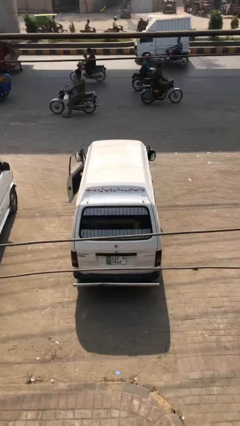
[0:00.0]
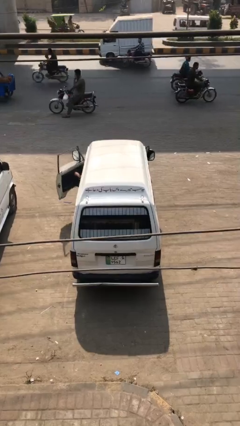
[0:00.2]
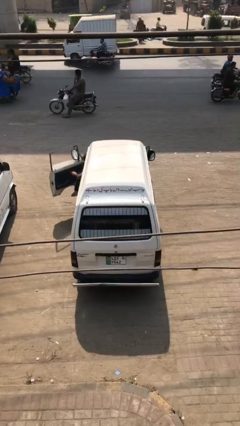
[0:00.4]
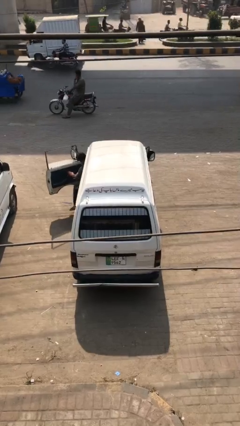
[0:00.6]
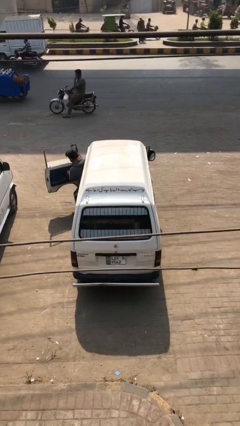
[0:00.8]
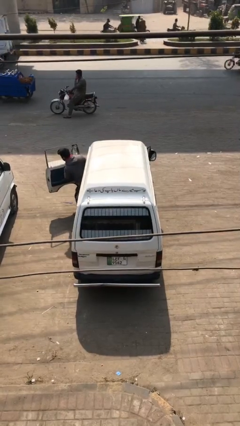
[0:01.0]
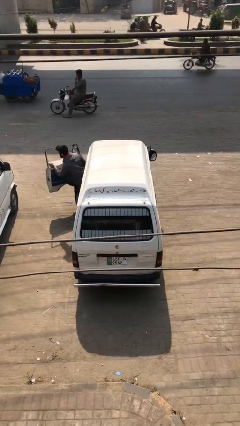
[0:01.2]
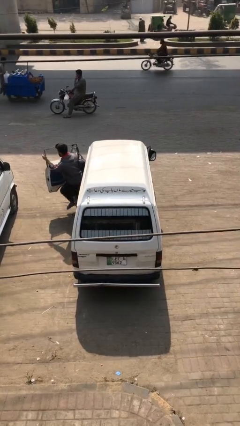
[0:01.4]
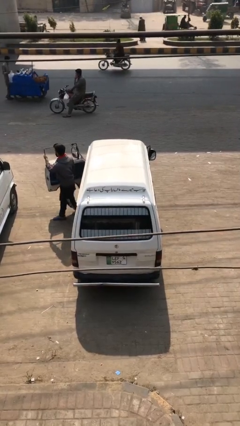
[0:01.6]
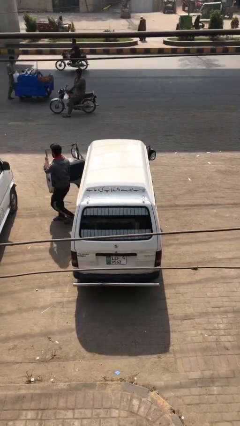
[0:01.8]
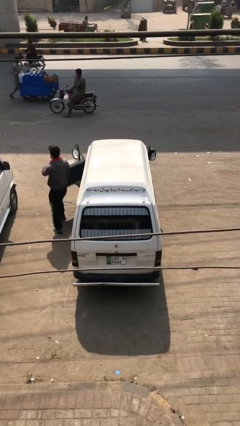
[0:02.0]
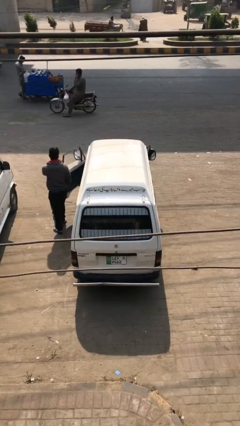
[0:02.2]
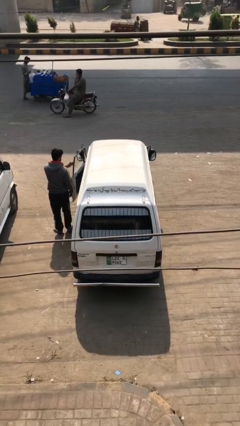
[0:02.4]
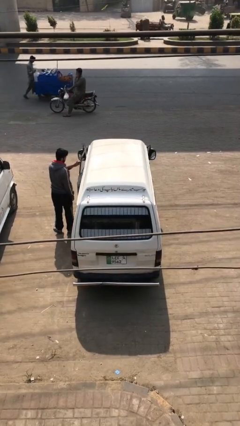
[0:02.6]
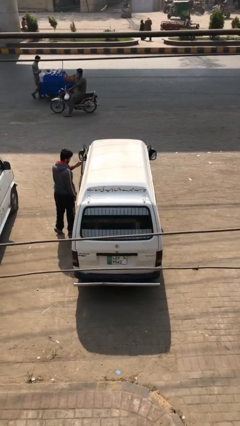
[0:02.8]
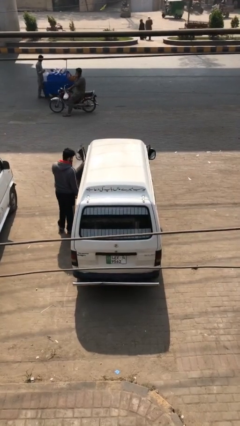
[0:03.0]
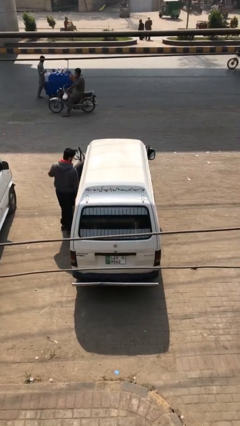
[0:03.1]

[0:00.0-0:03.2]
car drops off person

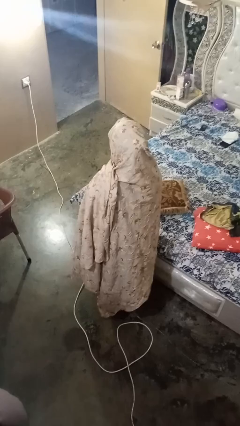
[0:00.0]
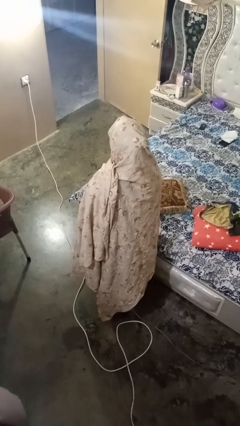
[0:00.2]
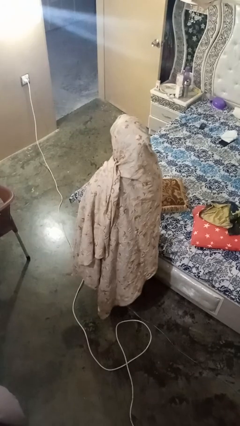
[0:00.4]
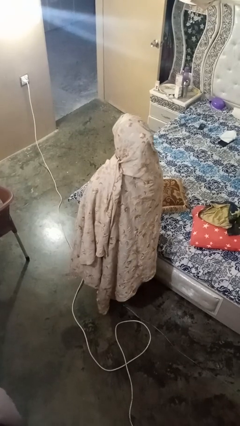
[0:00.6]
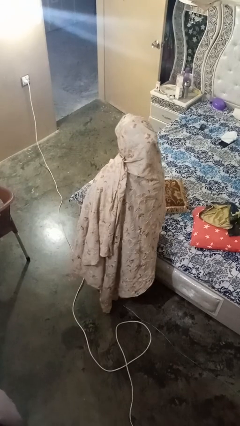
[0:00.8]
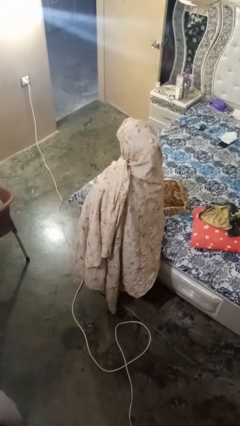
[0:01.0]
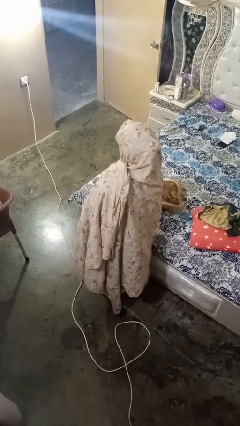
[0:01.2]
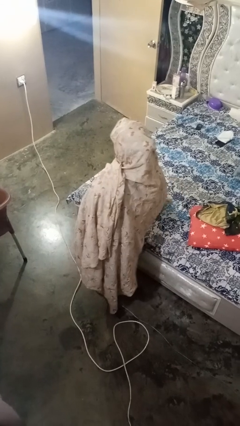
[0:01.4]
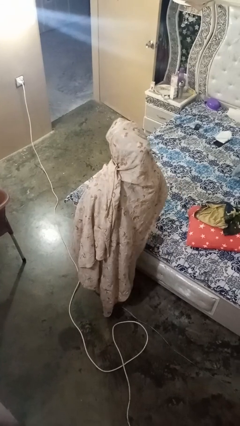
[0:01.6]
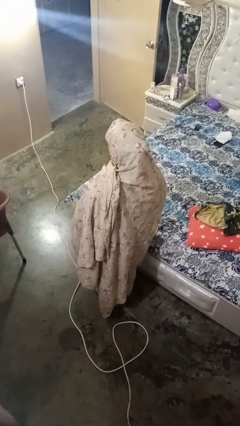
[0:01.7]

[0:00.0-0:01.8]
person picks up object from bed

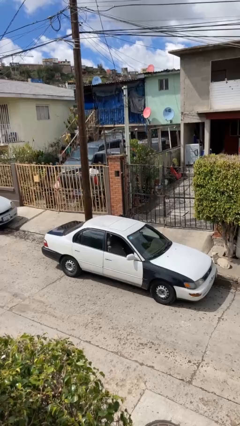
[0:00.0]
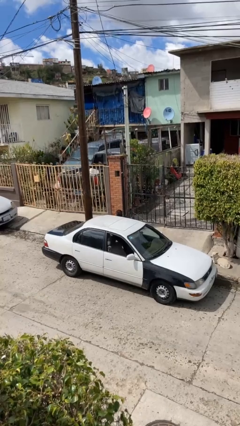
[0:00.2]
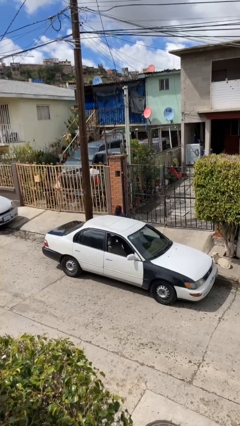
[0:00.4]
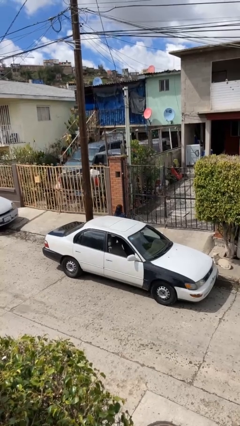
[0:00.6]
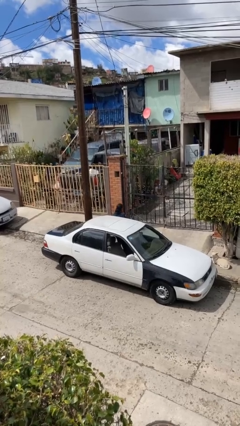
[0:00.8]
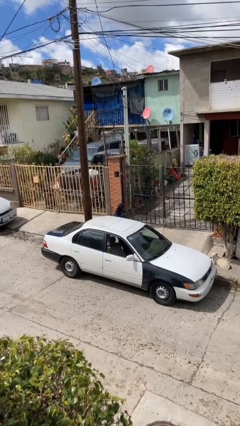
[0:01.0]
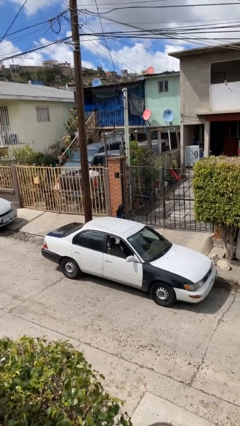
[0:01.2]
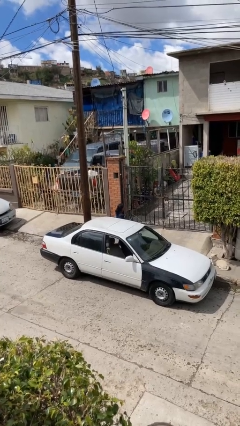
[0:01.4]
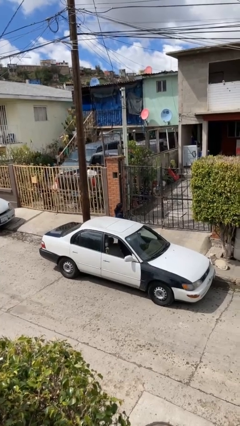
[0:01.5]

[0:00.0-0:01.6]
person exits car

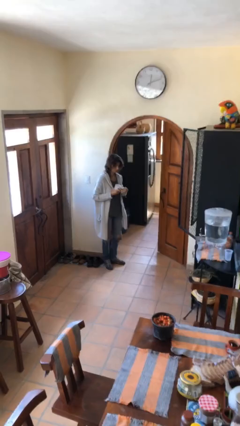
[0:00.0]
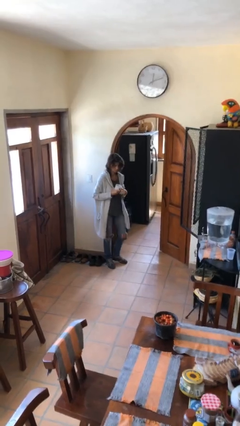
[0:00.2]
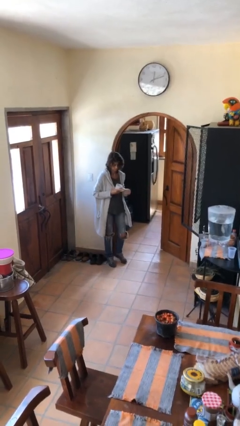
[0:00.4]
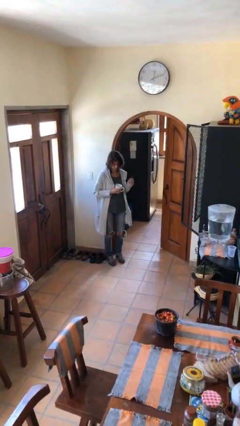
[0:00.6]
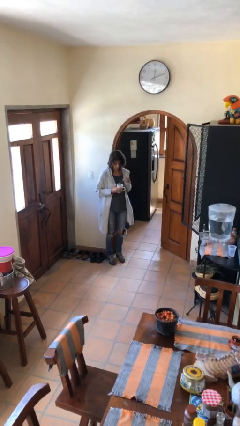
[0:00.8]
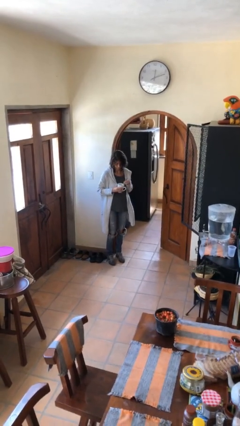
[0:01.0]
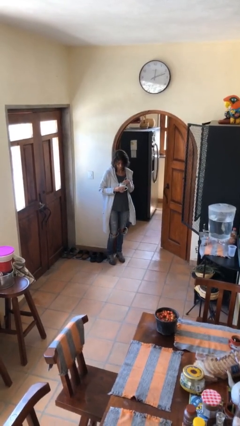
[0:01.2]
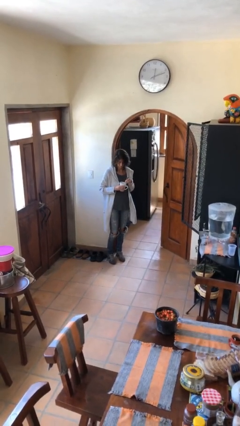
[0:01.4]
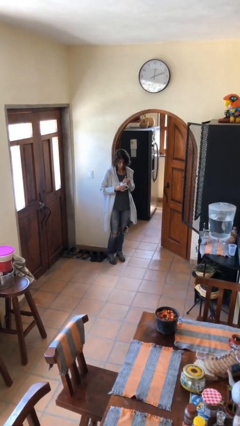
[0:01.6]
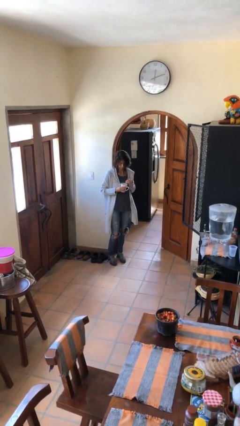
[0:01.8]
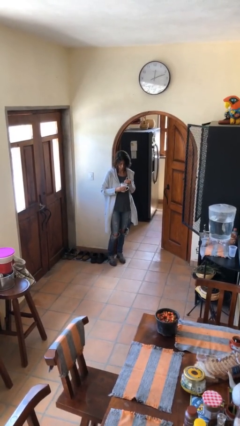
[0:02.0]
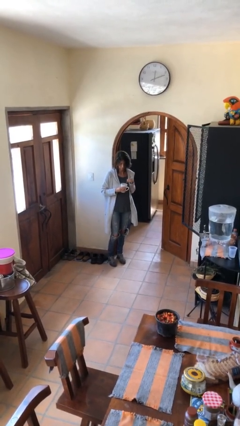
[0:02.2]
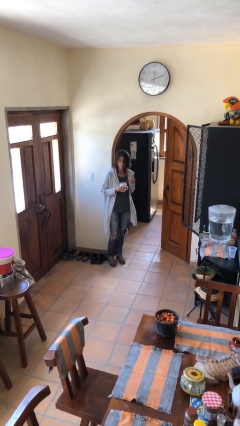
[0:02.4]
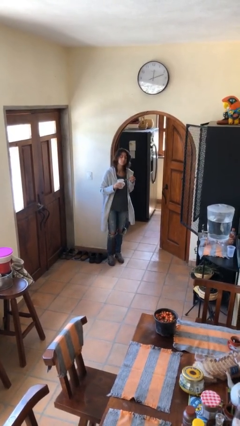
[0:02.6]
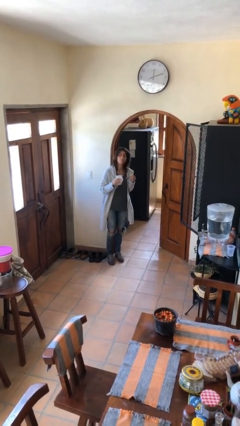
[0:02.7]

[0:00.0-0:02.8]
person stirs mug

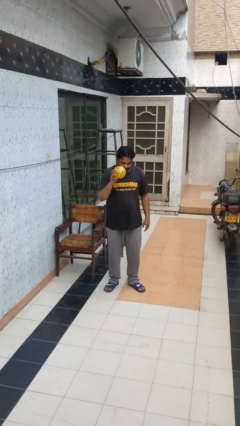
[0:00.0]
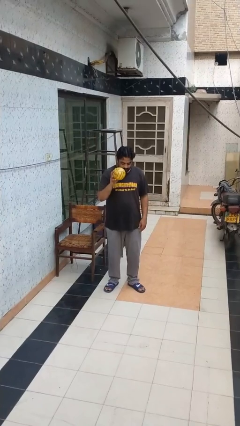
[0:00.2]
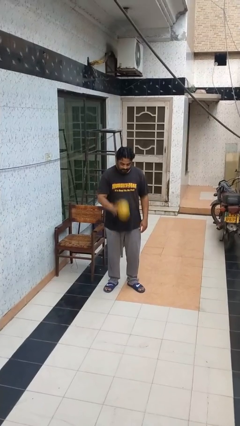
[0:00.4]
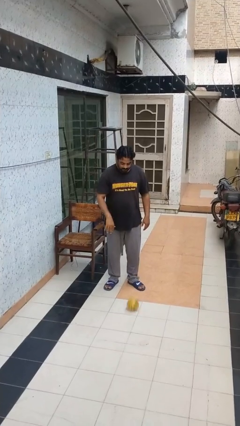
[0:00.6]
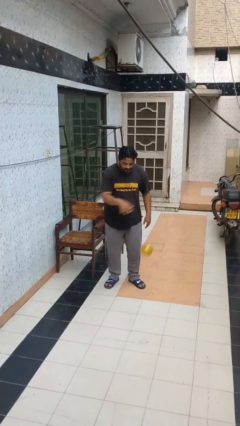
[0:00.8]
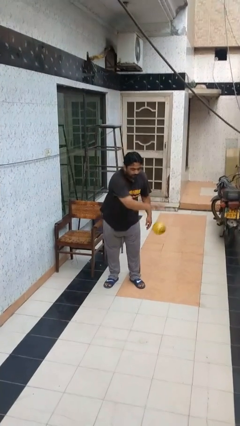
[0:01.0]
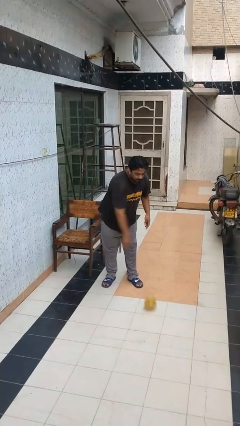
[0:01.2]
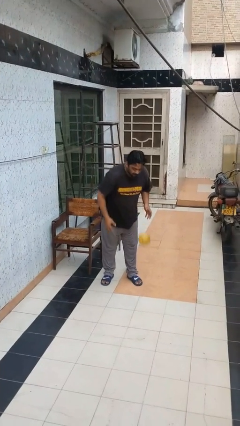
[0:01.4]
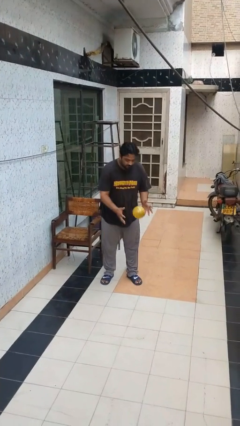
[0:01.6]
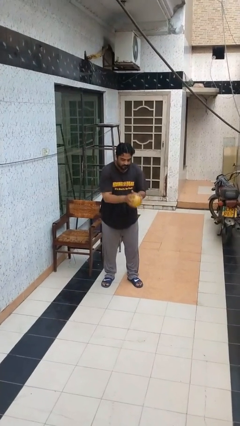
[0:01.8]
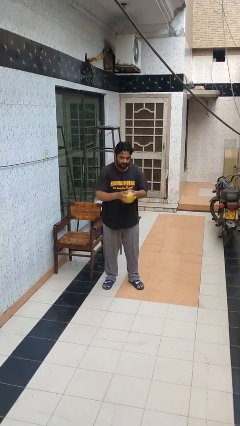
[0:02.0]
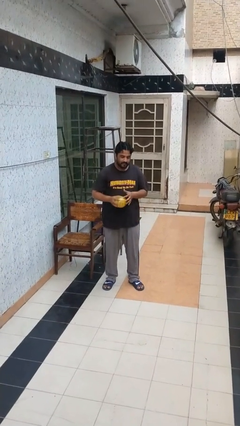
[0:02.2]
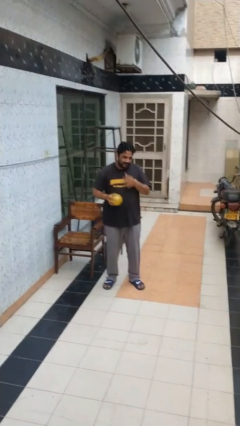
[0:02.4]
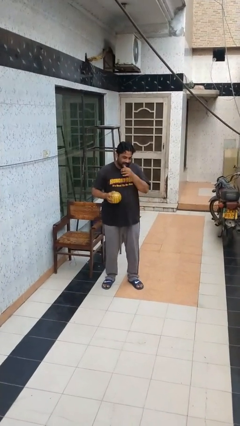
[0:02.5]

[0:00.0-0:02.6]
person bounces ball on floor

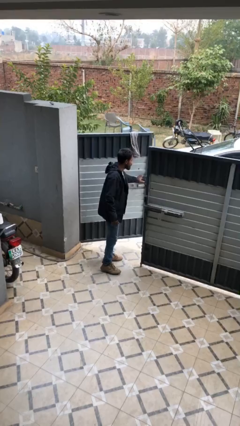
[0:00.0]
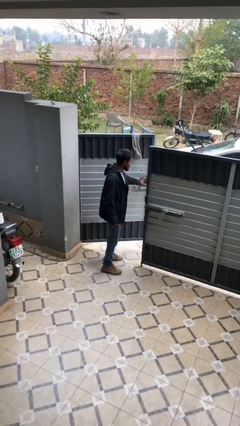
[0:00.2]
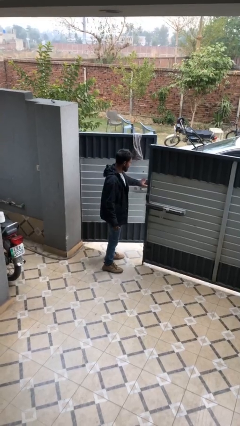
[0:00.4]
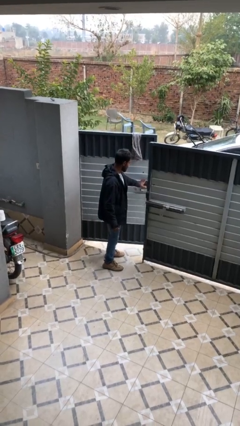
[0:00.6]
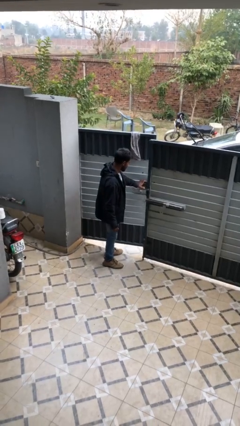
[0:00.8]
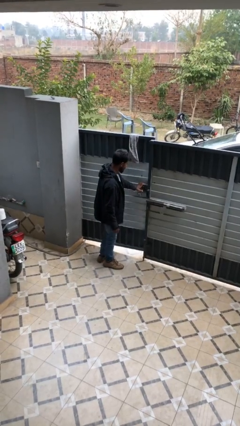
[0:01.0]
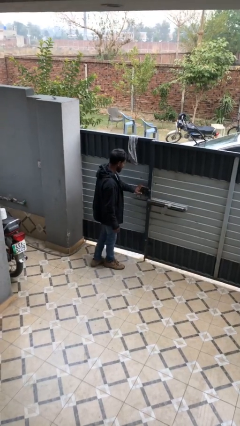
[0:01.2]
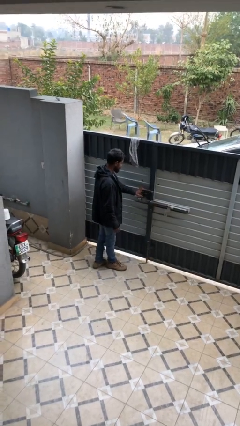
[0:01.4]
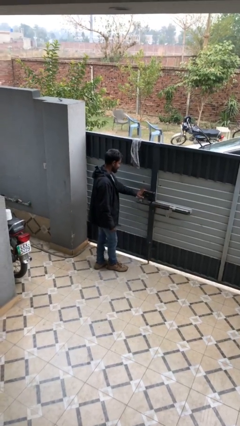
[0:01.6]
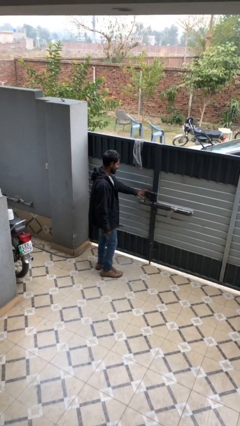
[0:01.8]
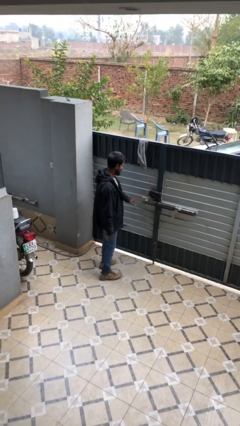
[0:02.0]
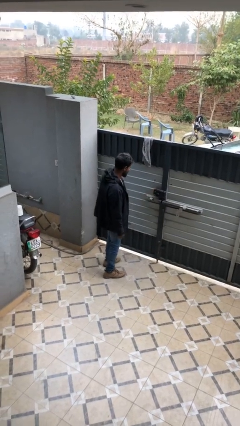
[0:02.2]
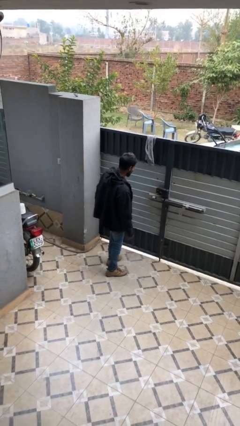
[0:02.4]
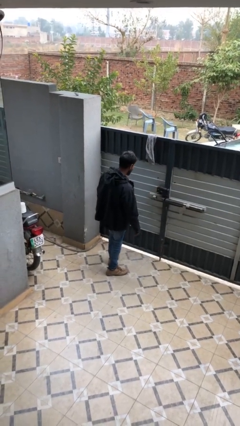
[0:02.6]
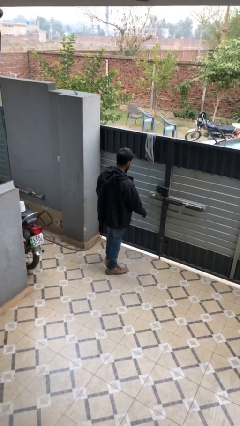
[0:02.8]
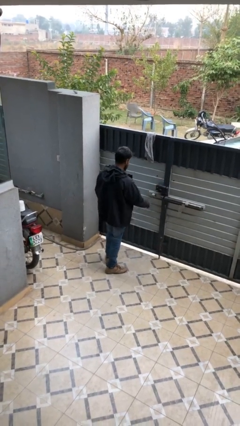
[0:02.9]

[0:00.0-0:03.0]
person closes facility door

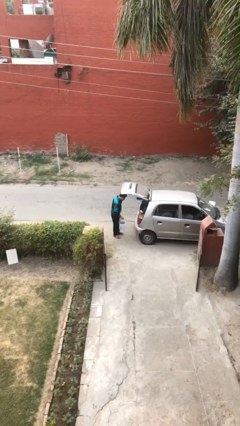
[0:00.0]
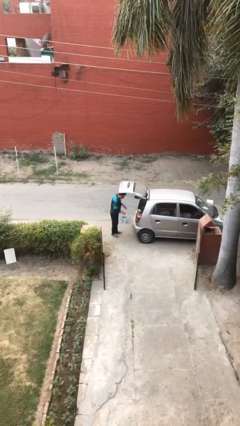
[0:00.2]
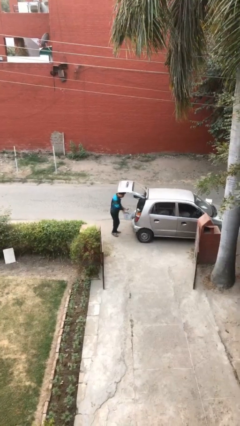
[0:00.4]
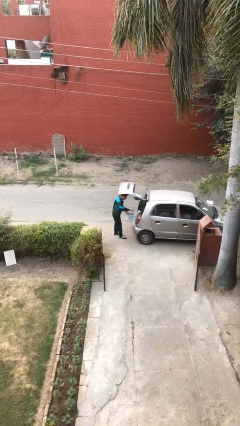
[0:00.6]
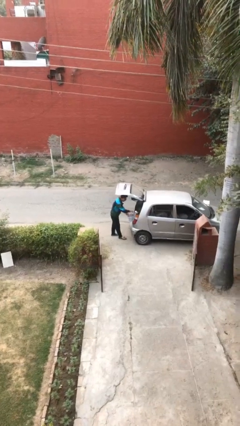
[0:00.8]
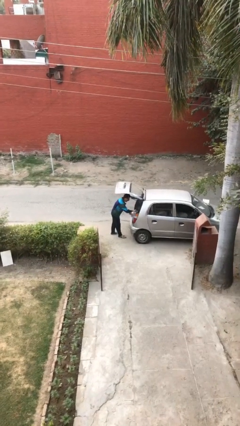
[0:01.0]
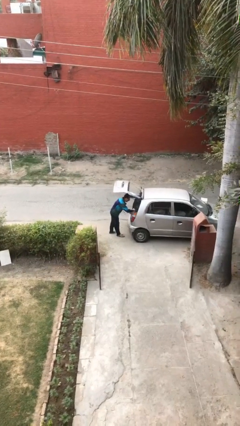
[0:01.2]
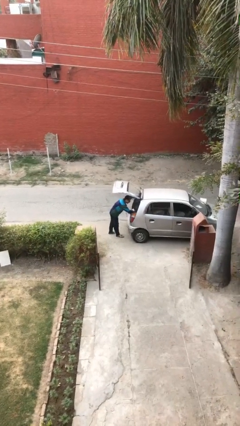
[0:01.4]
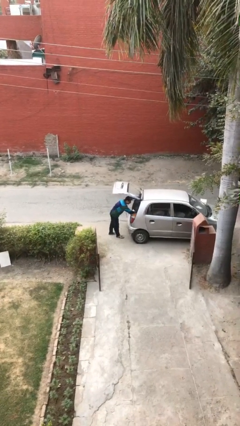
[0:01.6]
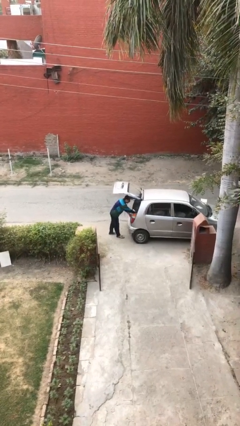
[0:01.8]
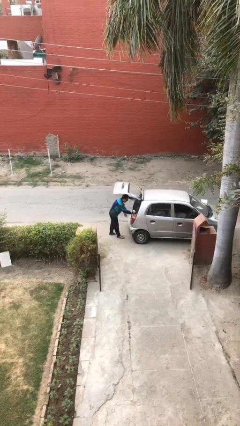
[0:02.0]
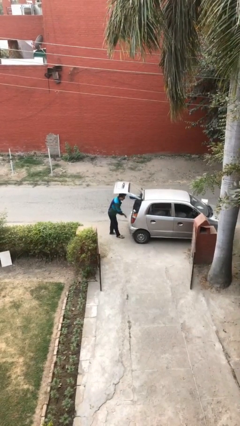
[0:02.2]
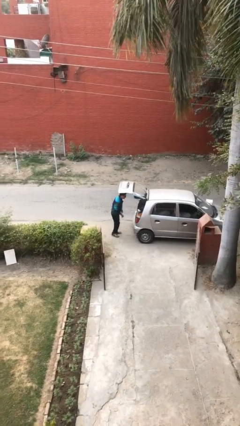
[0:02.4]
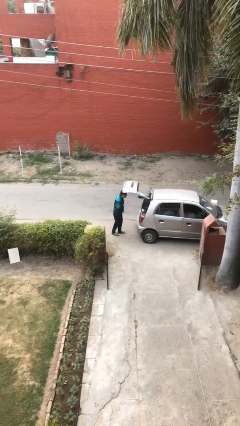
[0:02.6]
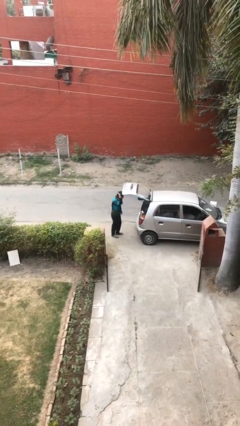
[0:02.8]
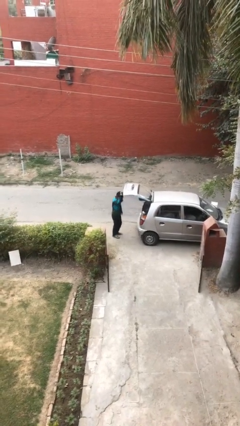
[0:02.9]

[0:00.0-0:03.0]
person loads car
